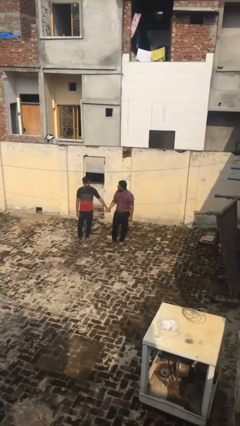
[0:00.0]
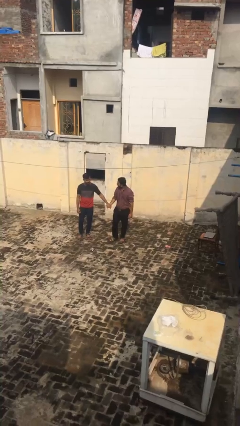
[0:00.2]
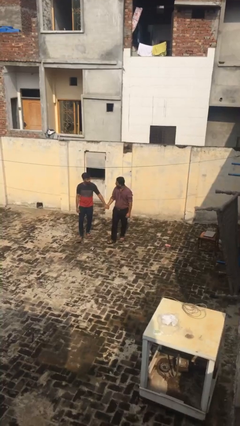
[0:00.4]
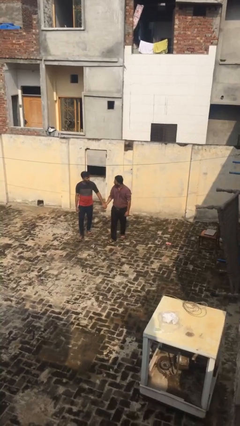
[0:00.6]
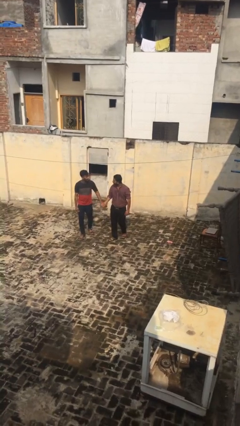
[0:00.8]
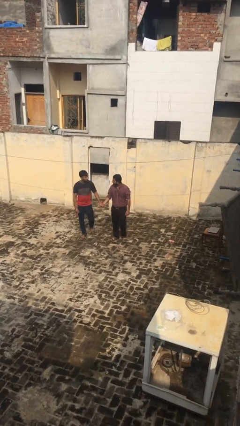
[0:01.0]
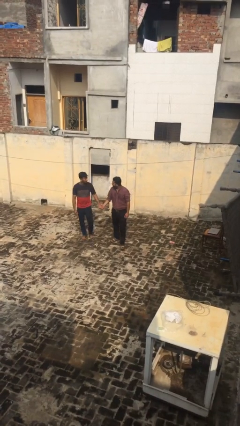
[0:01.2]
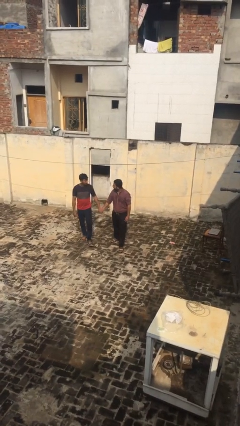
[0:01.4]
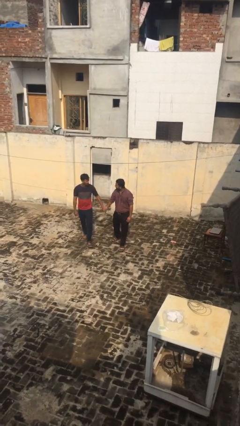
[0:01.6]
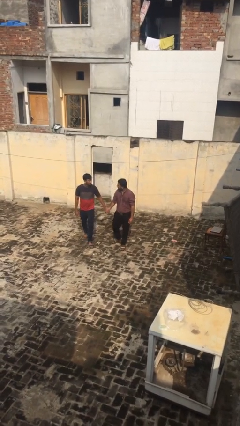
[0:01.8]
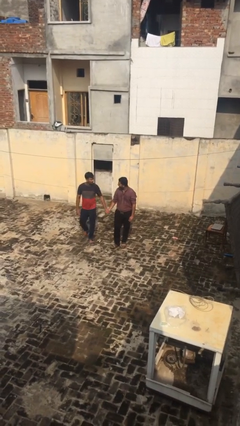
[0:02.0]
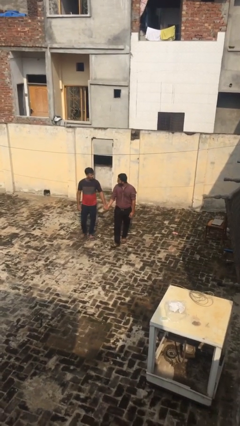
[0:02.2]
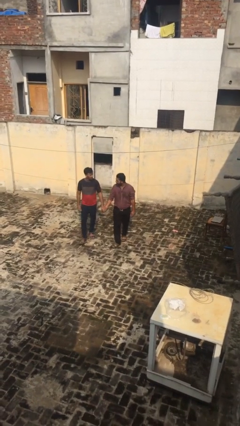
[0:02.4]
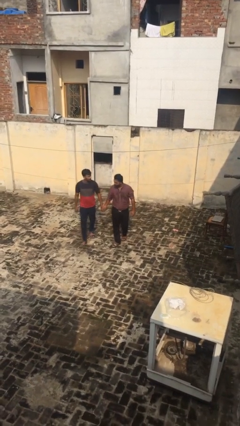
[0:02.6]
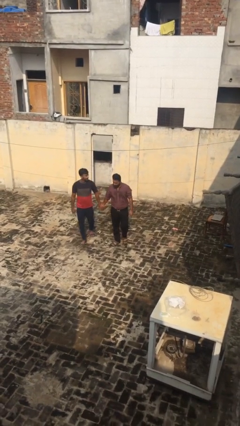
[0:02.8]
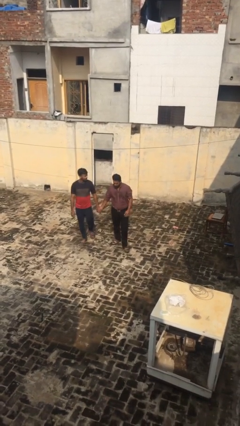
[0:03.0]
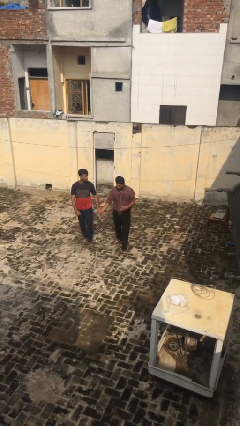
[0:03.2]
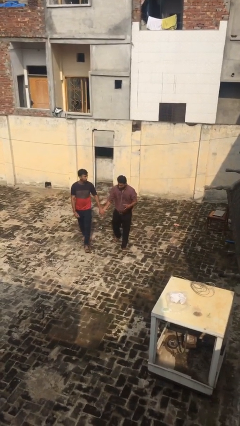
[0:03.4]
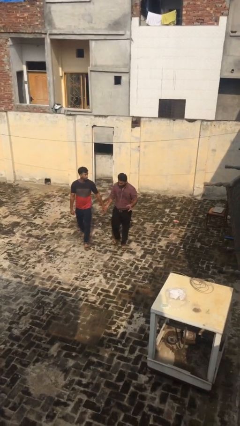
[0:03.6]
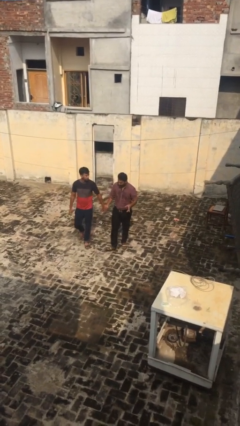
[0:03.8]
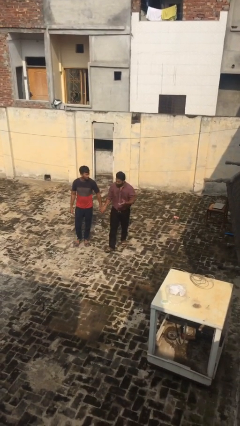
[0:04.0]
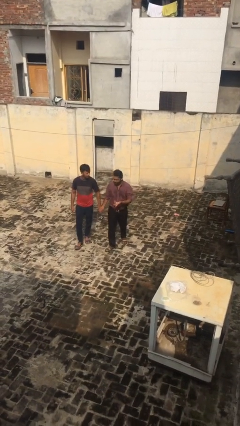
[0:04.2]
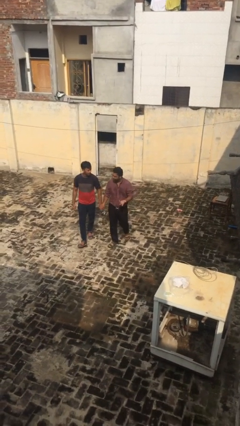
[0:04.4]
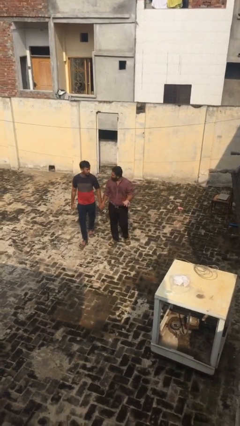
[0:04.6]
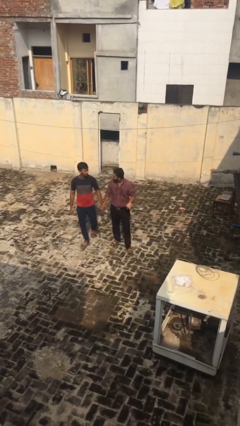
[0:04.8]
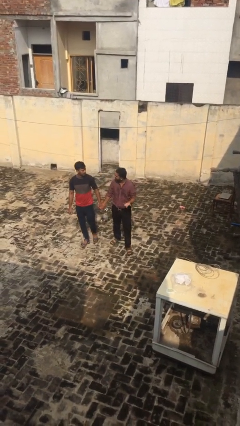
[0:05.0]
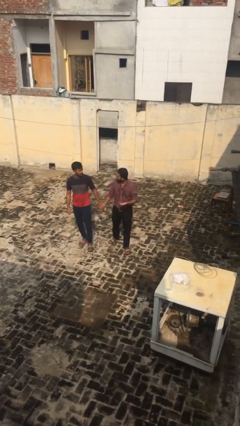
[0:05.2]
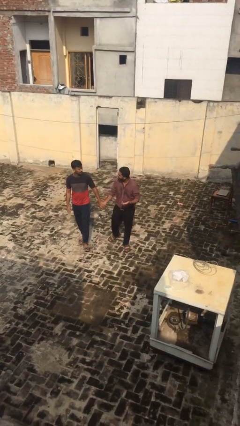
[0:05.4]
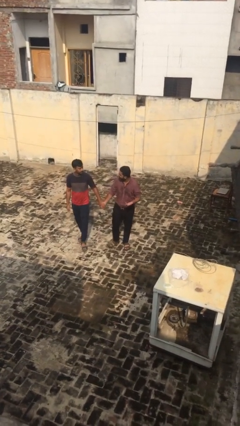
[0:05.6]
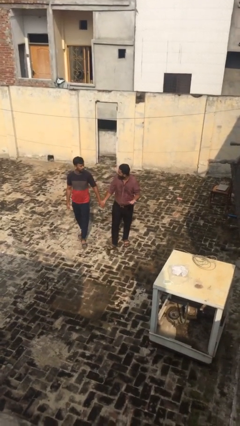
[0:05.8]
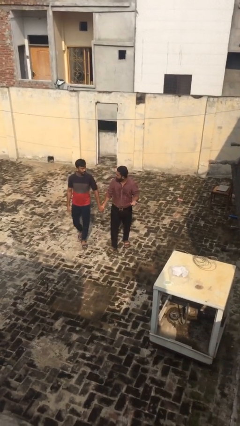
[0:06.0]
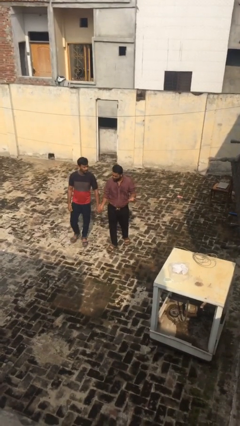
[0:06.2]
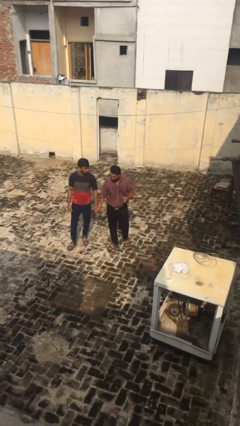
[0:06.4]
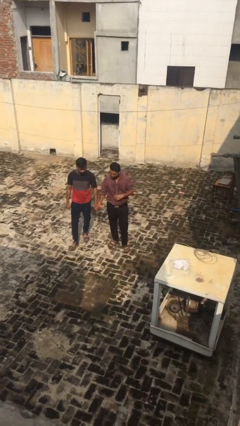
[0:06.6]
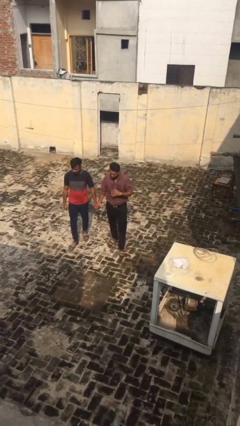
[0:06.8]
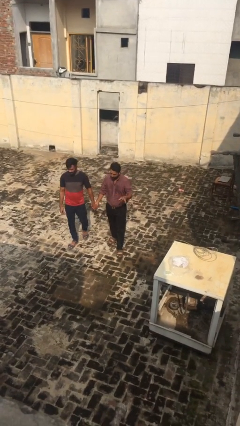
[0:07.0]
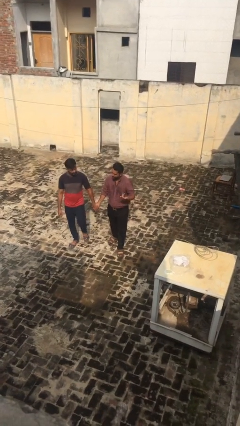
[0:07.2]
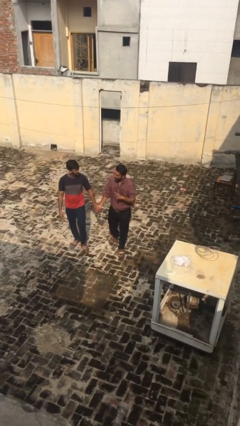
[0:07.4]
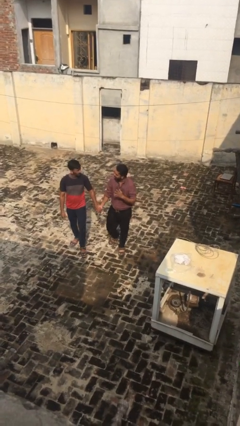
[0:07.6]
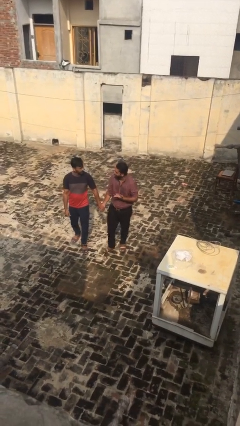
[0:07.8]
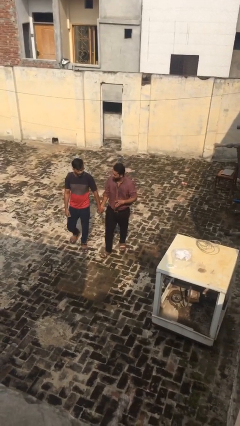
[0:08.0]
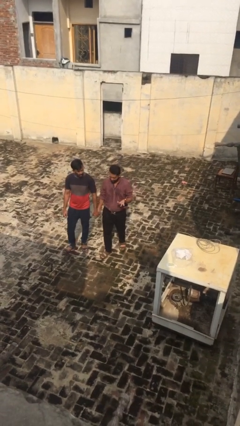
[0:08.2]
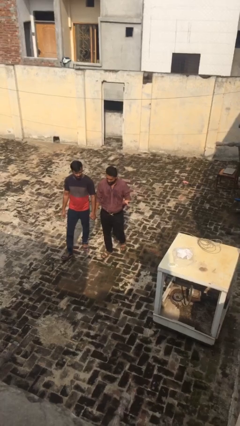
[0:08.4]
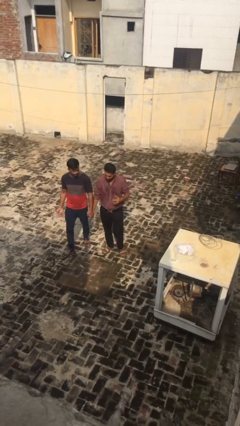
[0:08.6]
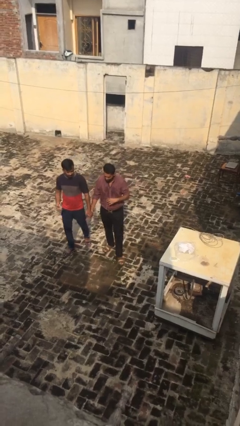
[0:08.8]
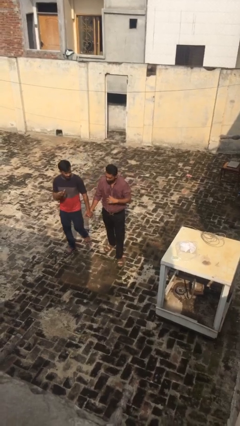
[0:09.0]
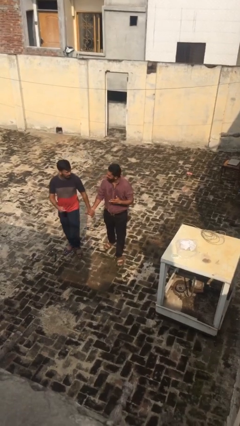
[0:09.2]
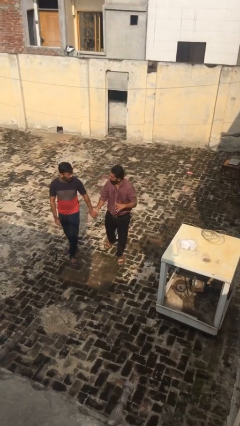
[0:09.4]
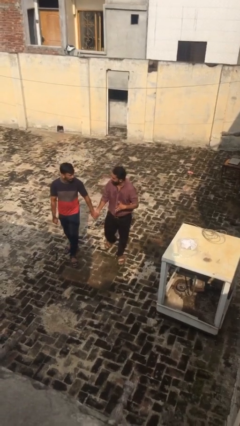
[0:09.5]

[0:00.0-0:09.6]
person holds hand

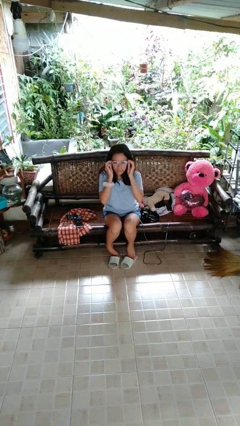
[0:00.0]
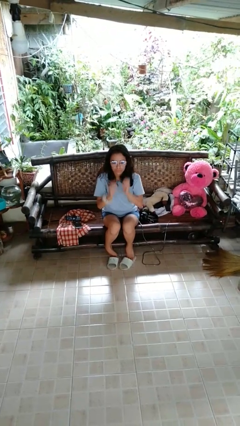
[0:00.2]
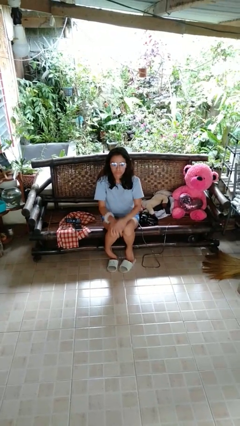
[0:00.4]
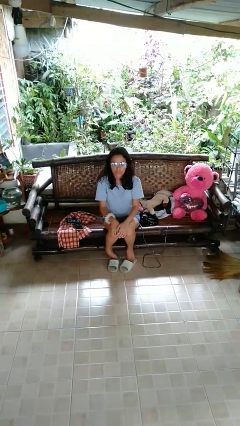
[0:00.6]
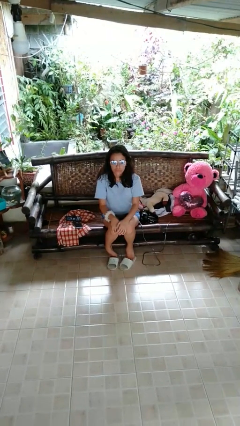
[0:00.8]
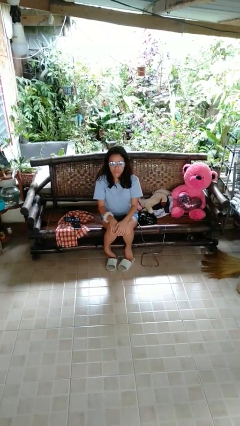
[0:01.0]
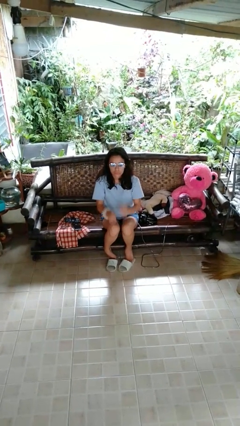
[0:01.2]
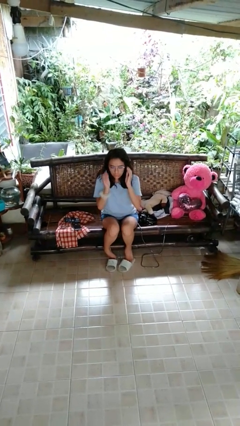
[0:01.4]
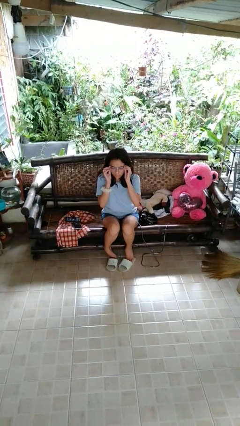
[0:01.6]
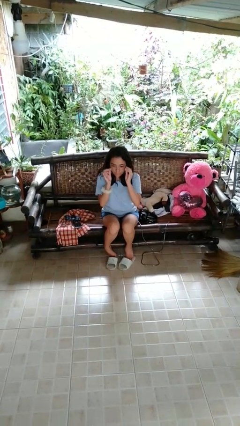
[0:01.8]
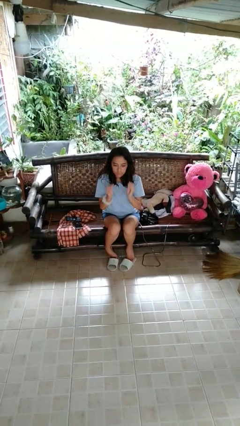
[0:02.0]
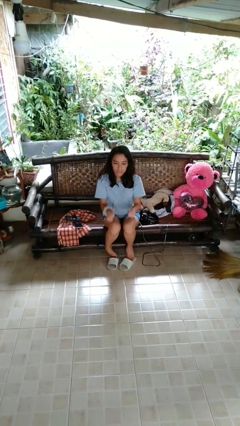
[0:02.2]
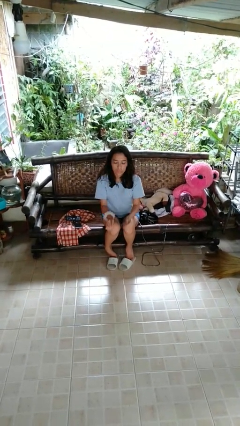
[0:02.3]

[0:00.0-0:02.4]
person grabs person by forearm

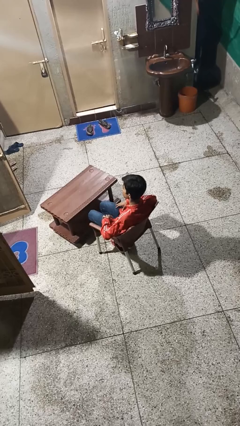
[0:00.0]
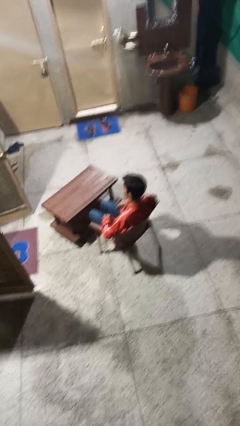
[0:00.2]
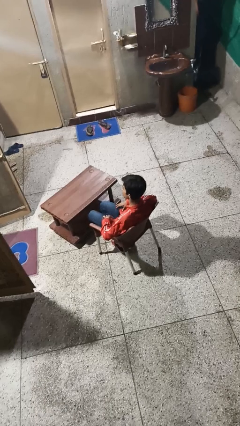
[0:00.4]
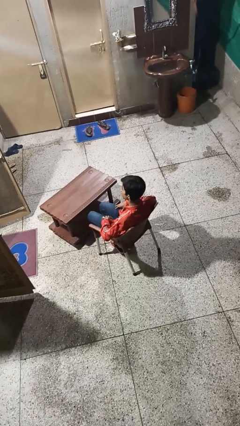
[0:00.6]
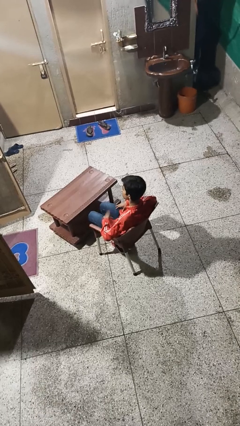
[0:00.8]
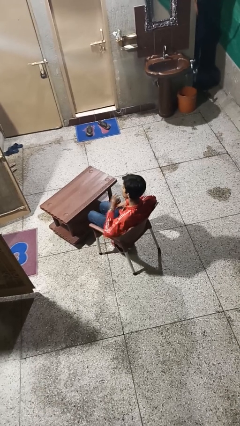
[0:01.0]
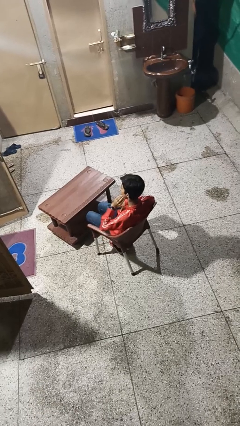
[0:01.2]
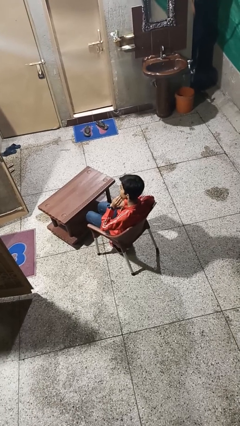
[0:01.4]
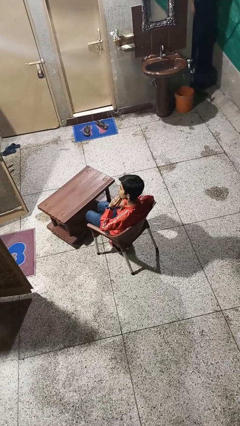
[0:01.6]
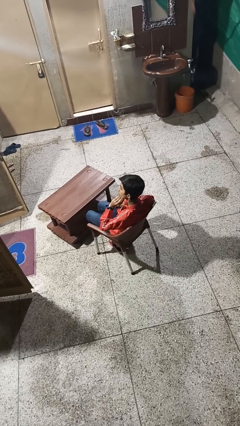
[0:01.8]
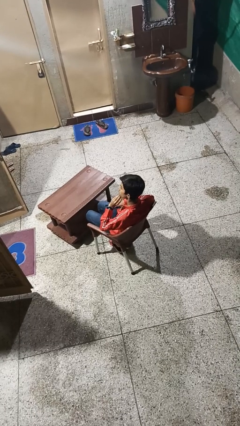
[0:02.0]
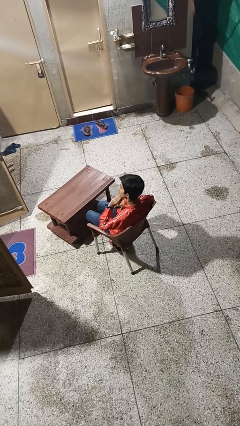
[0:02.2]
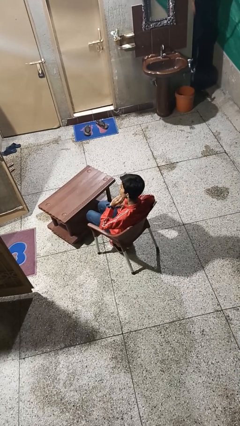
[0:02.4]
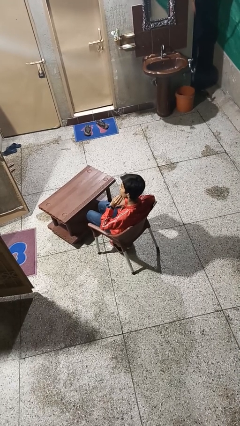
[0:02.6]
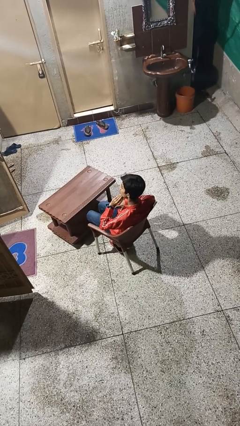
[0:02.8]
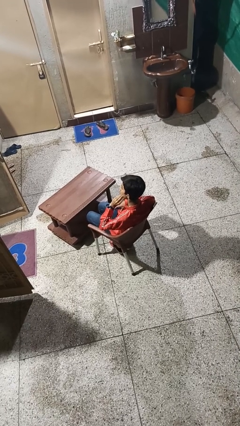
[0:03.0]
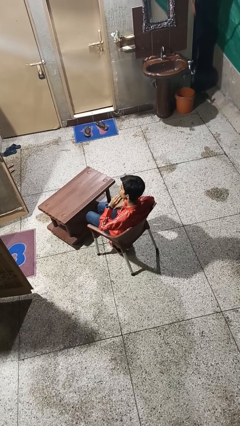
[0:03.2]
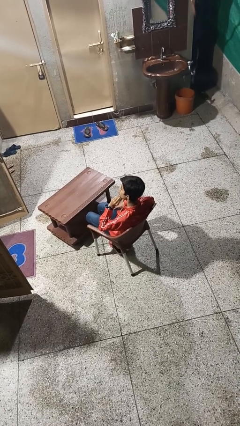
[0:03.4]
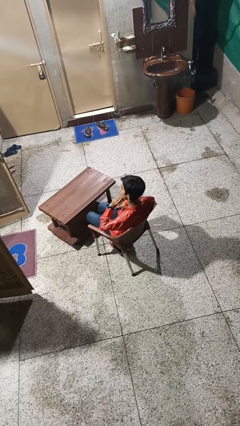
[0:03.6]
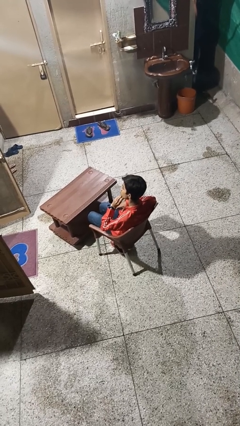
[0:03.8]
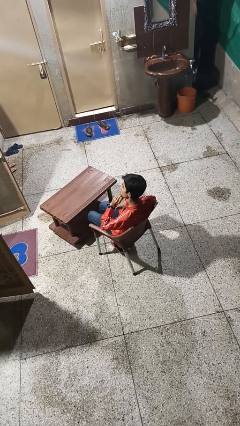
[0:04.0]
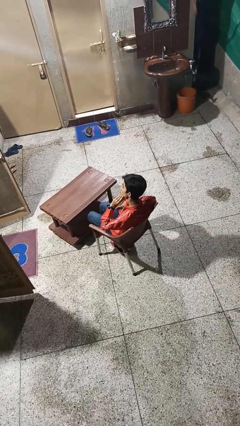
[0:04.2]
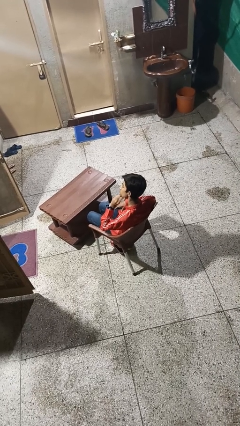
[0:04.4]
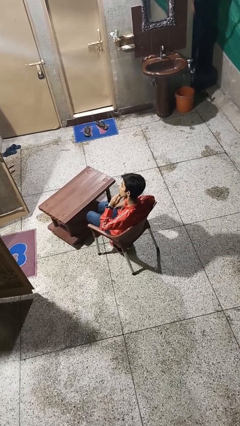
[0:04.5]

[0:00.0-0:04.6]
person strokes chin

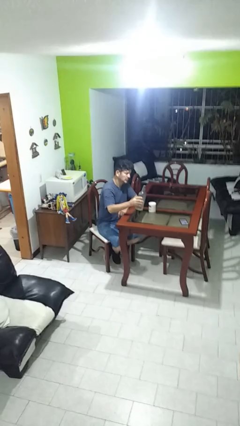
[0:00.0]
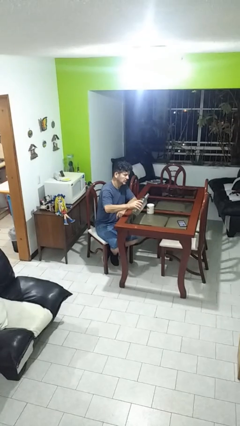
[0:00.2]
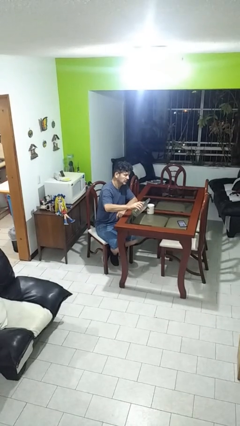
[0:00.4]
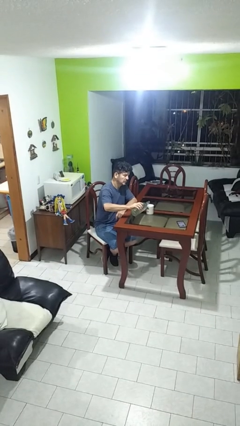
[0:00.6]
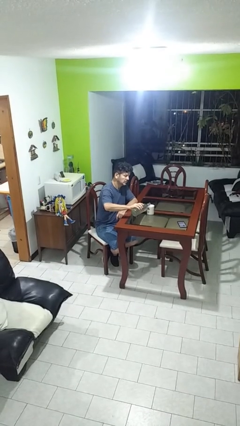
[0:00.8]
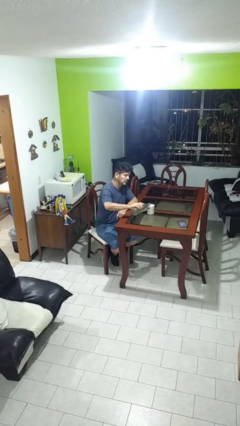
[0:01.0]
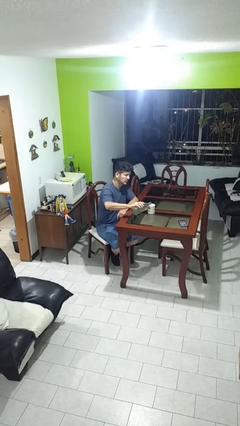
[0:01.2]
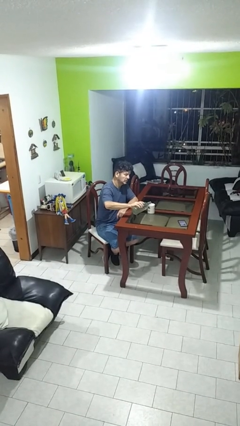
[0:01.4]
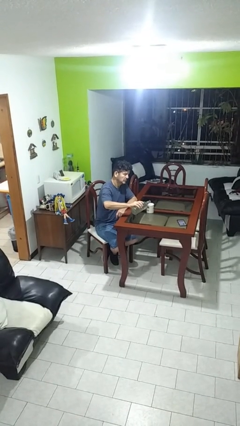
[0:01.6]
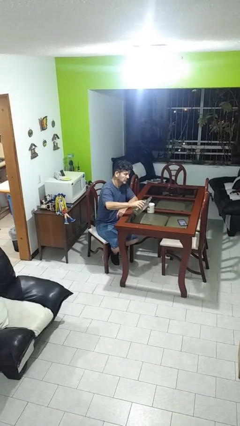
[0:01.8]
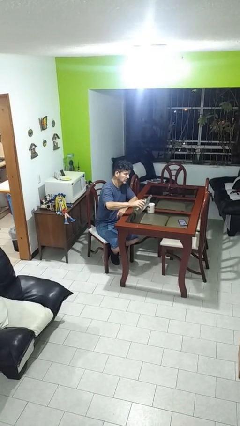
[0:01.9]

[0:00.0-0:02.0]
person pours liquid into cup
